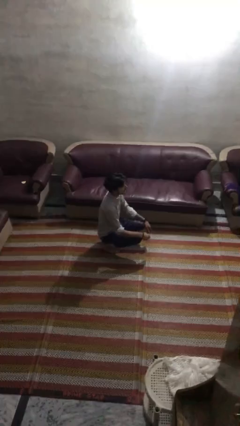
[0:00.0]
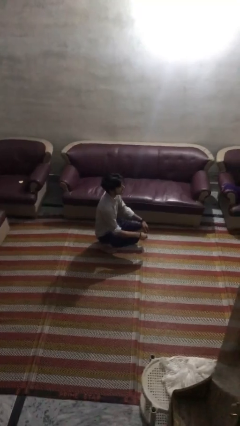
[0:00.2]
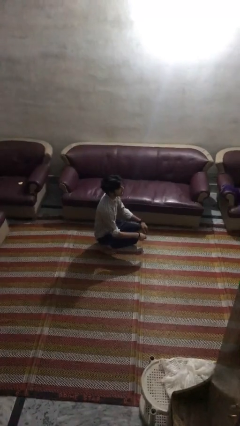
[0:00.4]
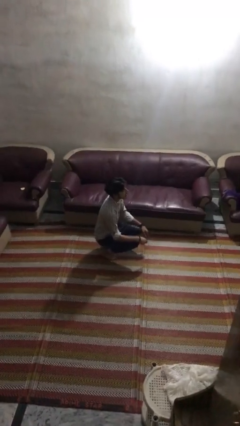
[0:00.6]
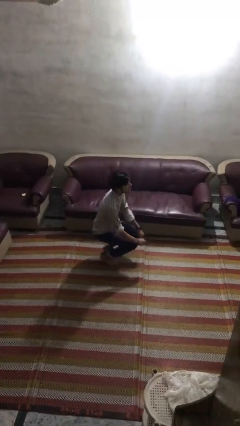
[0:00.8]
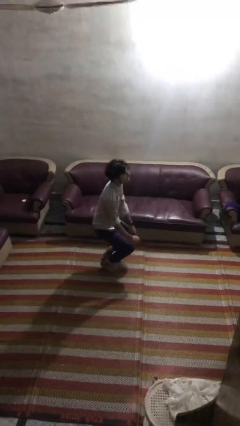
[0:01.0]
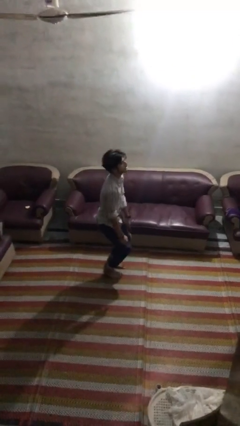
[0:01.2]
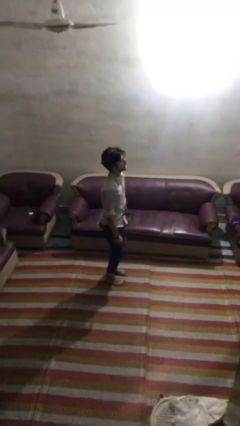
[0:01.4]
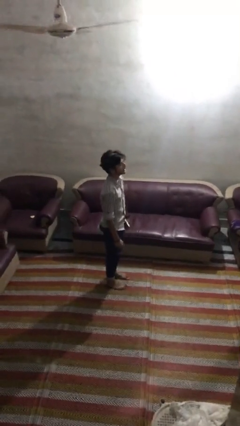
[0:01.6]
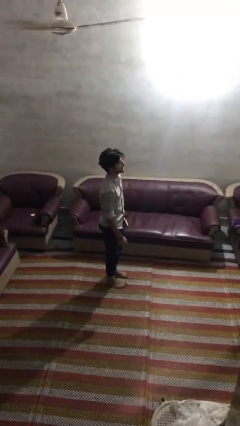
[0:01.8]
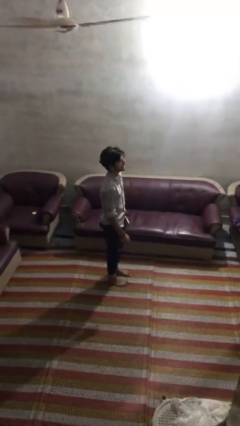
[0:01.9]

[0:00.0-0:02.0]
person stands up

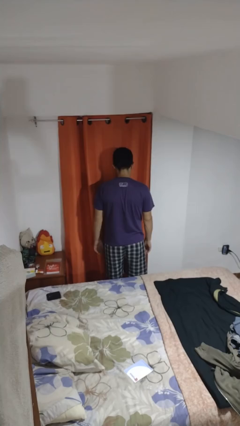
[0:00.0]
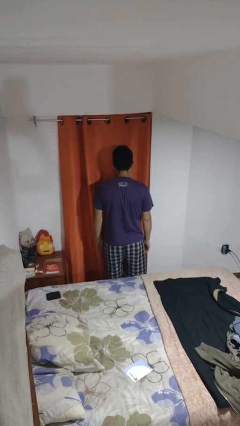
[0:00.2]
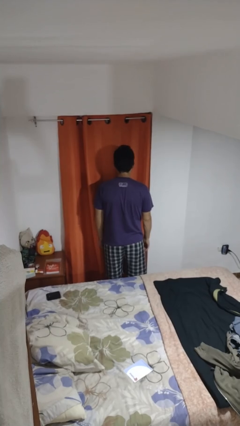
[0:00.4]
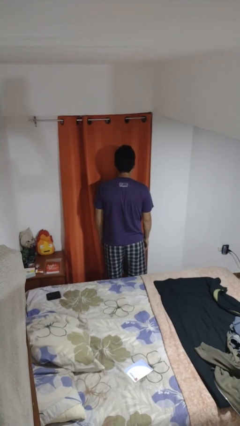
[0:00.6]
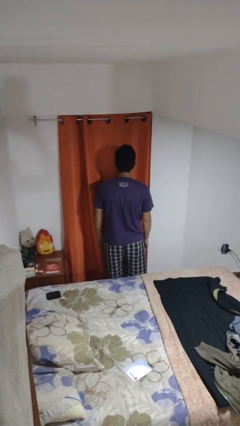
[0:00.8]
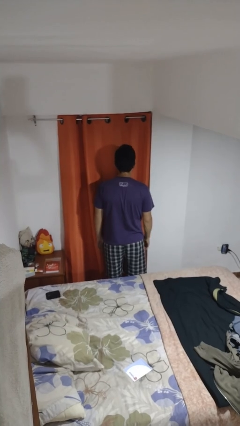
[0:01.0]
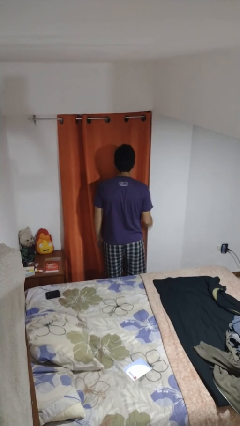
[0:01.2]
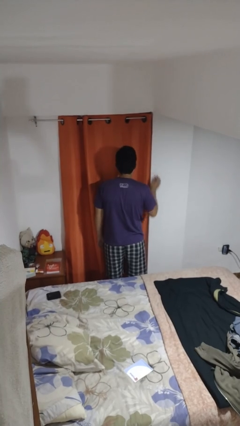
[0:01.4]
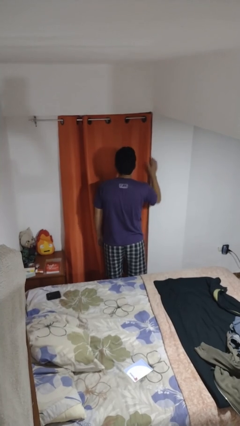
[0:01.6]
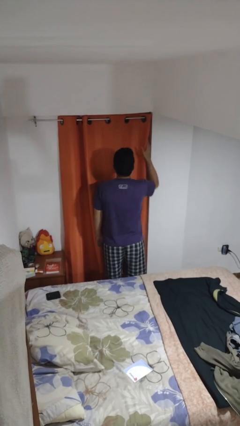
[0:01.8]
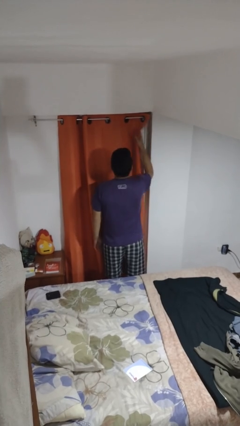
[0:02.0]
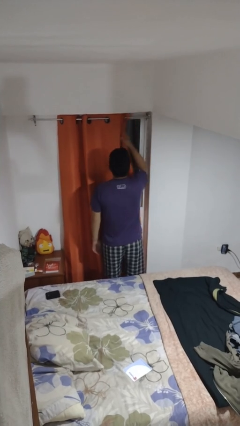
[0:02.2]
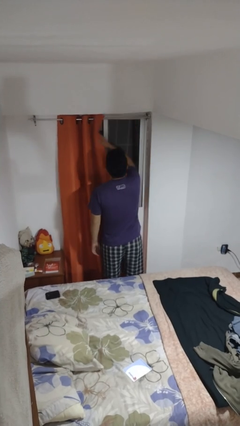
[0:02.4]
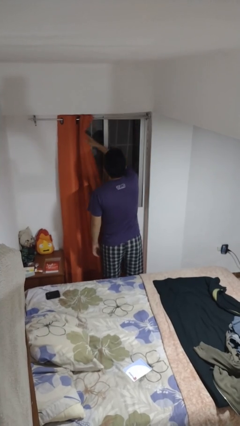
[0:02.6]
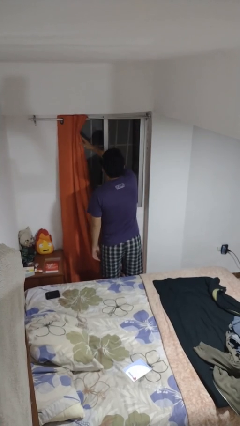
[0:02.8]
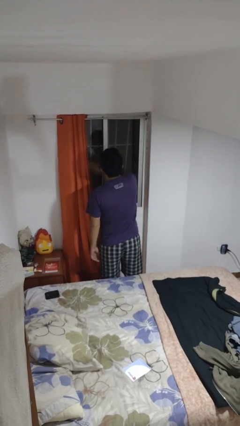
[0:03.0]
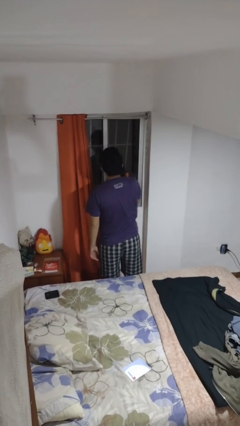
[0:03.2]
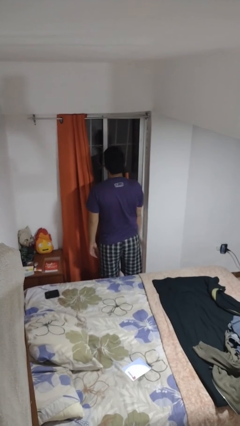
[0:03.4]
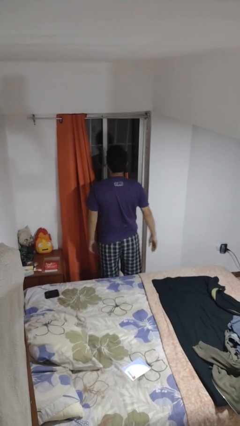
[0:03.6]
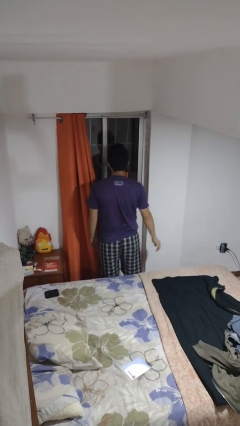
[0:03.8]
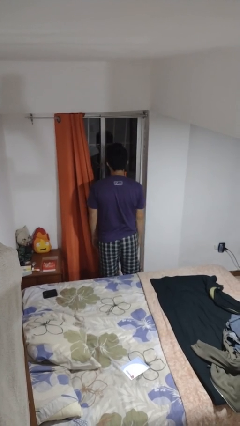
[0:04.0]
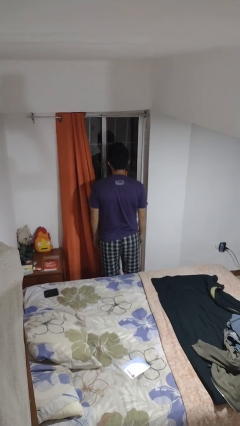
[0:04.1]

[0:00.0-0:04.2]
person opens curtains

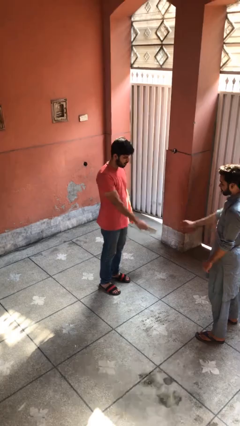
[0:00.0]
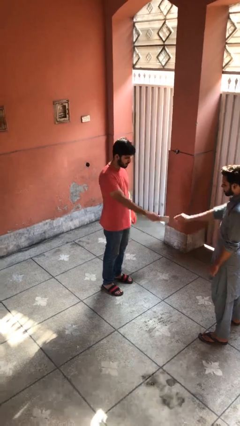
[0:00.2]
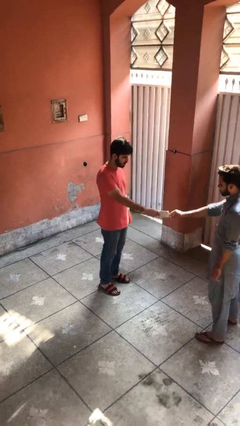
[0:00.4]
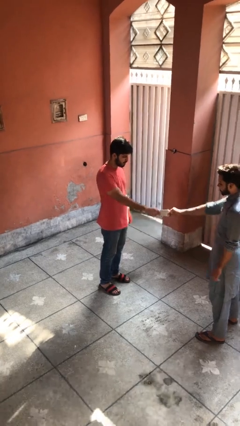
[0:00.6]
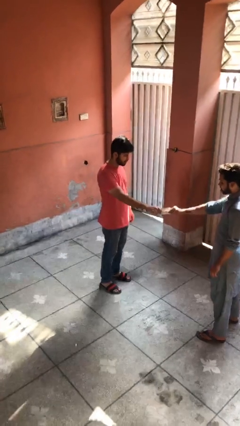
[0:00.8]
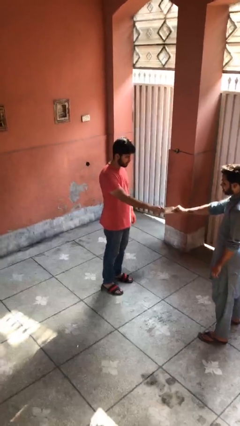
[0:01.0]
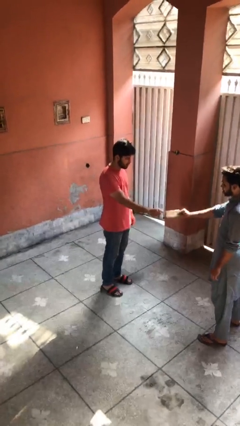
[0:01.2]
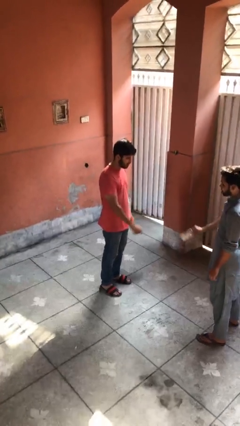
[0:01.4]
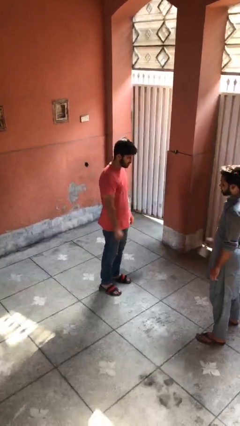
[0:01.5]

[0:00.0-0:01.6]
person transfers object to person

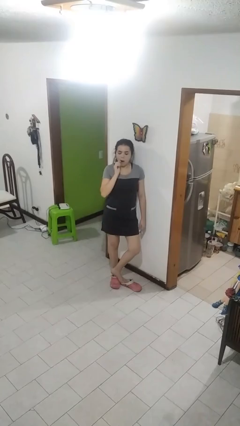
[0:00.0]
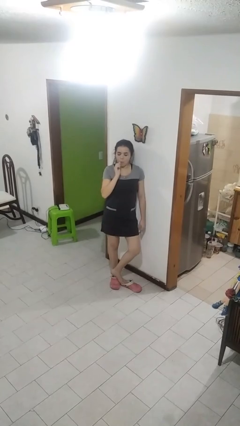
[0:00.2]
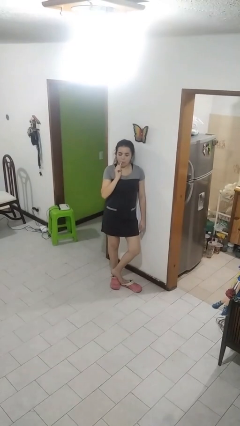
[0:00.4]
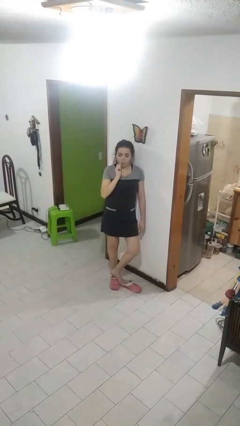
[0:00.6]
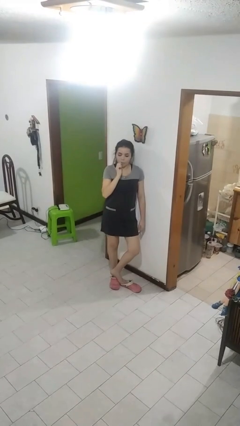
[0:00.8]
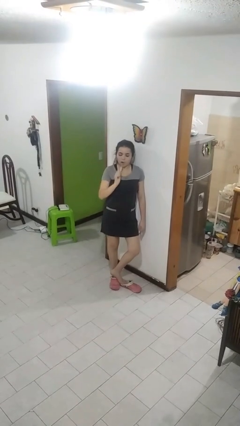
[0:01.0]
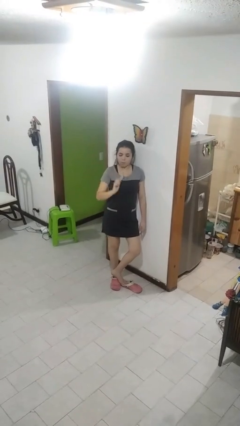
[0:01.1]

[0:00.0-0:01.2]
person brushes teeth

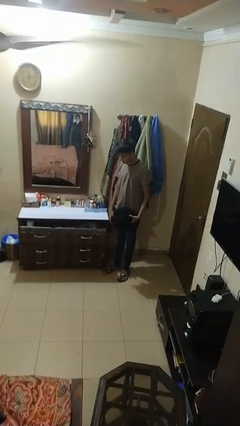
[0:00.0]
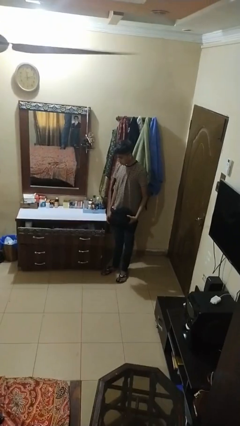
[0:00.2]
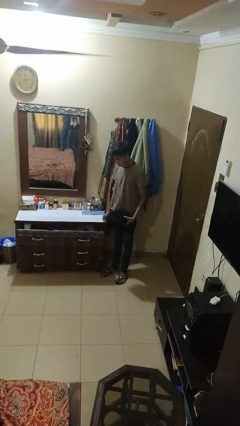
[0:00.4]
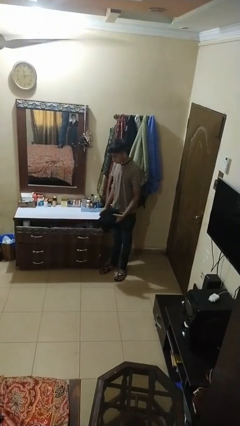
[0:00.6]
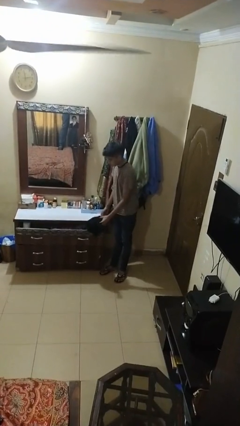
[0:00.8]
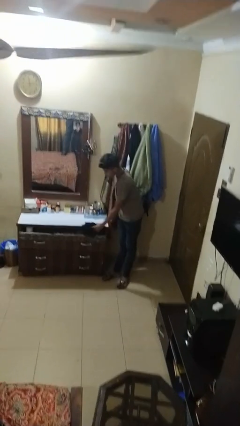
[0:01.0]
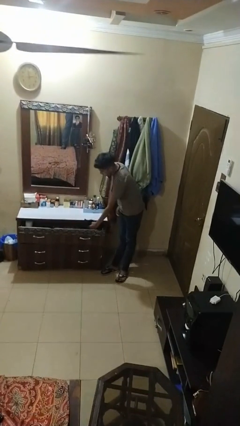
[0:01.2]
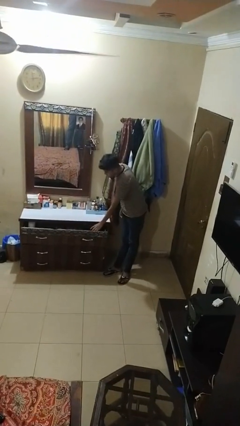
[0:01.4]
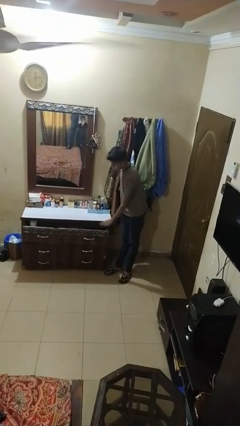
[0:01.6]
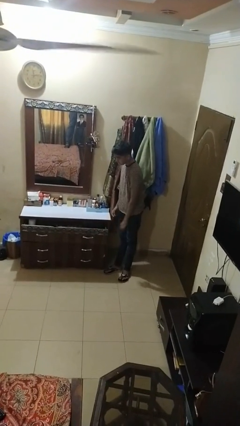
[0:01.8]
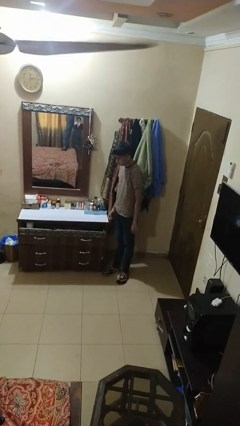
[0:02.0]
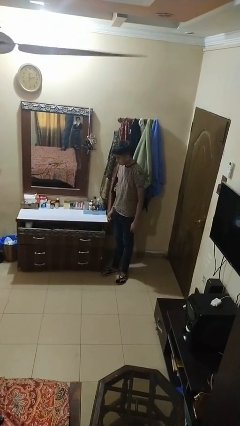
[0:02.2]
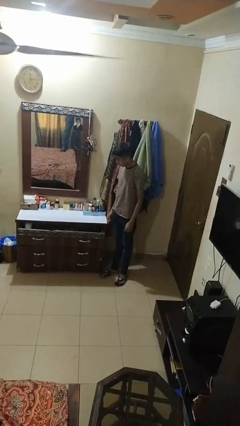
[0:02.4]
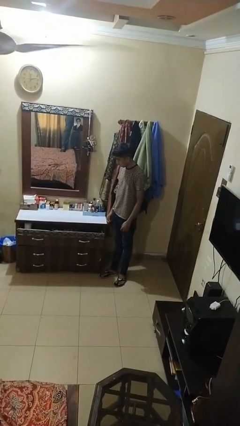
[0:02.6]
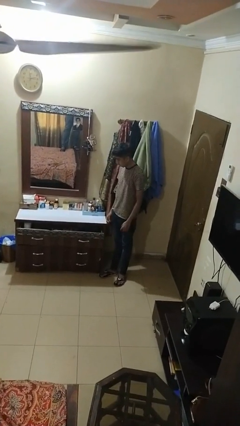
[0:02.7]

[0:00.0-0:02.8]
person puts clothes into dresser

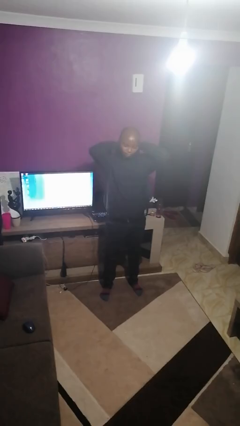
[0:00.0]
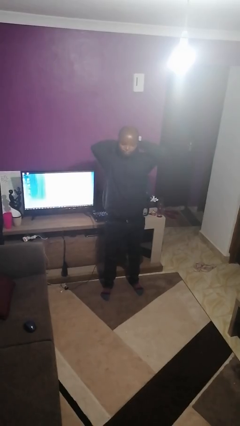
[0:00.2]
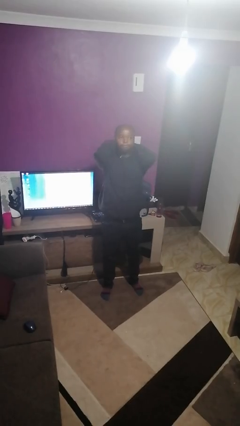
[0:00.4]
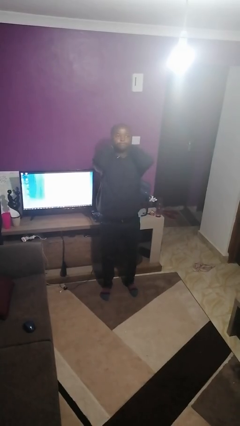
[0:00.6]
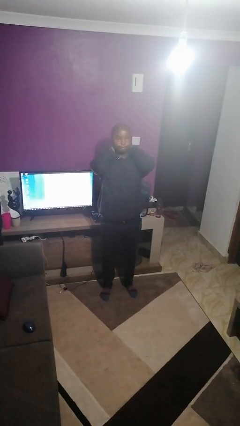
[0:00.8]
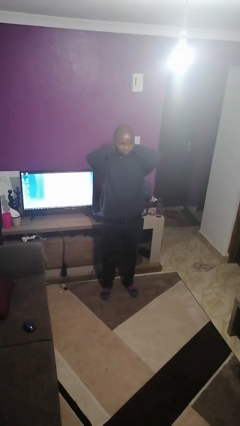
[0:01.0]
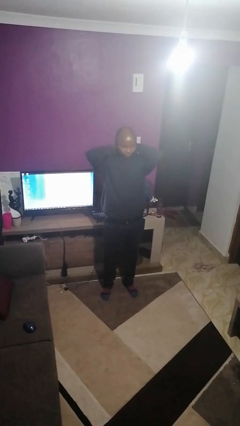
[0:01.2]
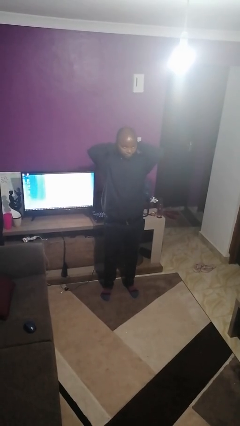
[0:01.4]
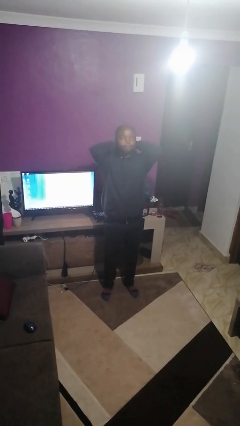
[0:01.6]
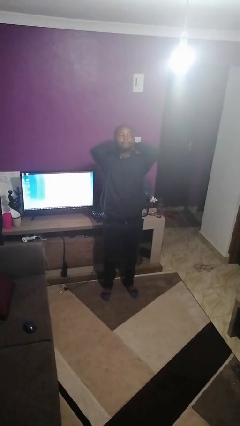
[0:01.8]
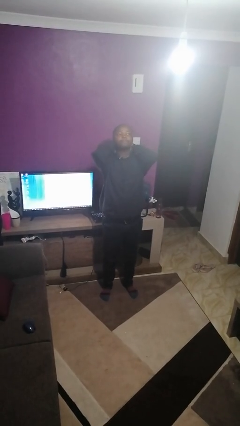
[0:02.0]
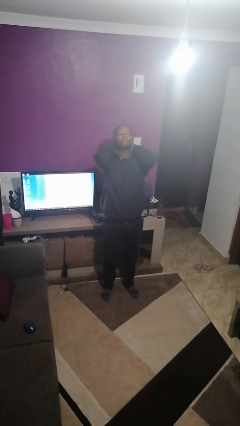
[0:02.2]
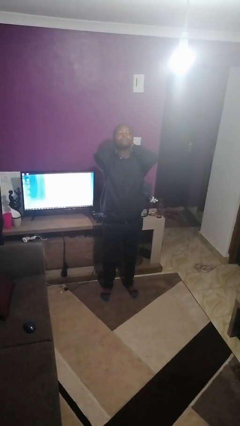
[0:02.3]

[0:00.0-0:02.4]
person rubs neck

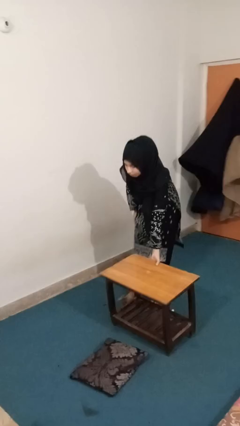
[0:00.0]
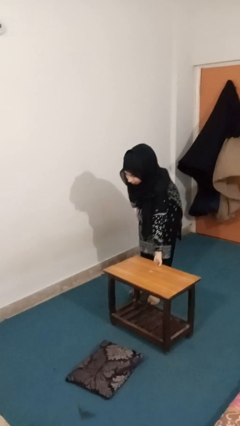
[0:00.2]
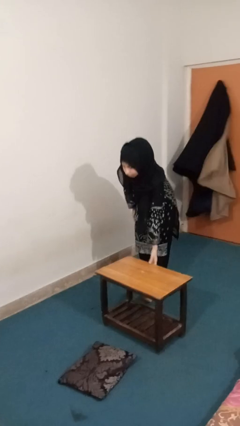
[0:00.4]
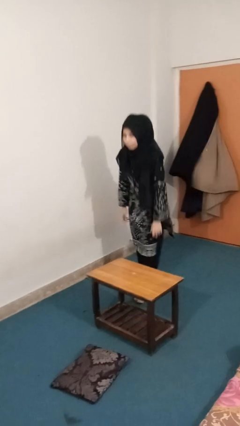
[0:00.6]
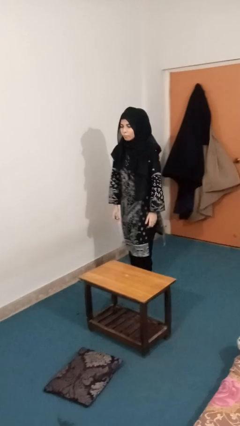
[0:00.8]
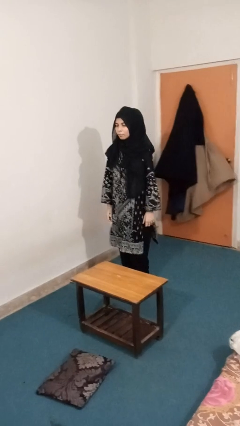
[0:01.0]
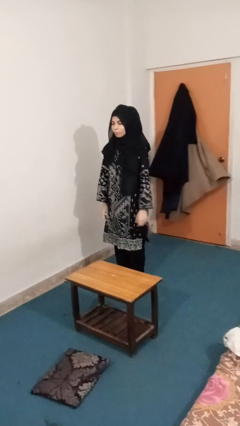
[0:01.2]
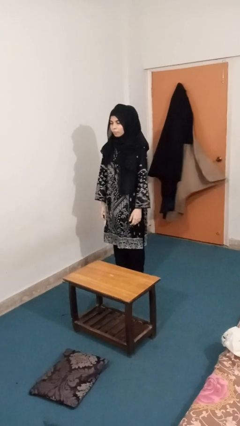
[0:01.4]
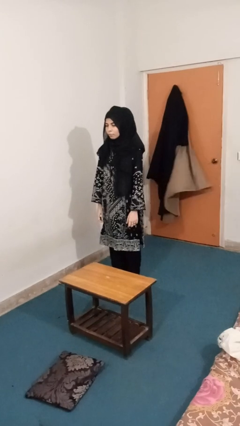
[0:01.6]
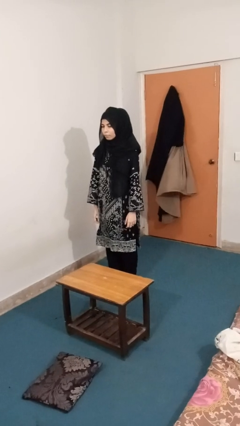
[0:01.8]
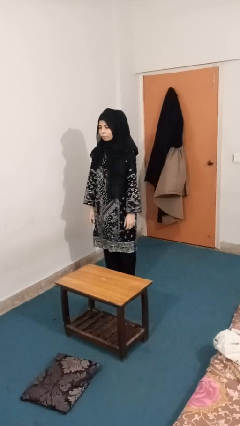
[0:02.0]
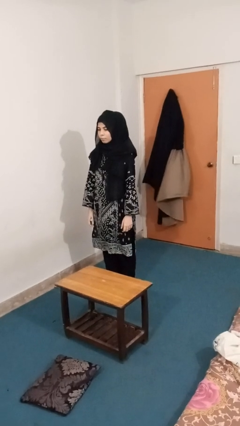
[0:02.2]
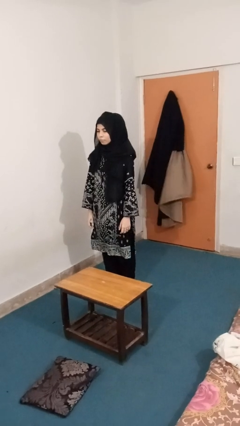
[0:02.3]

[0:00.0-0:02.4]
person sets upright furniture

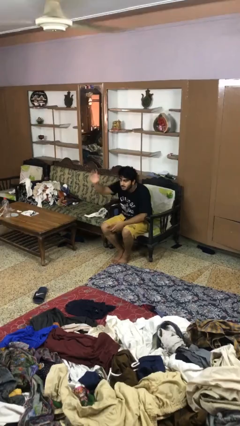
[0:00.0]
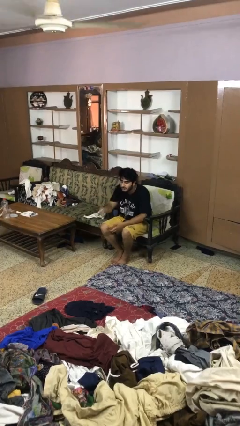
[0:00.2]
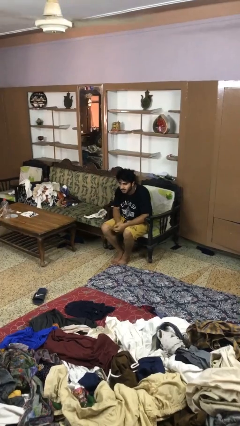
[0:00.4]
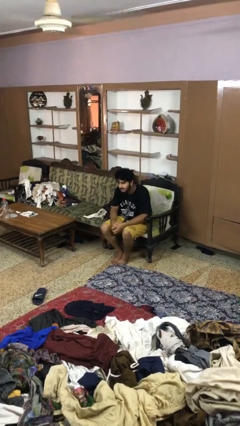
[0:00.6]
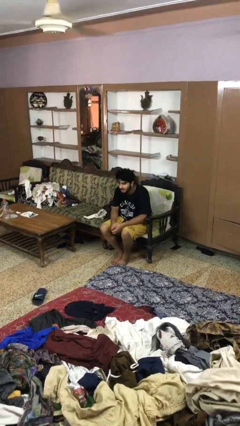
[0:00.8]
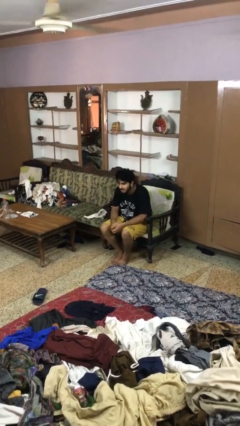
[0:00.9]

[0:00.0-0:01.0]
person gestures lower hand
